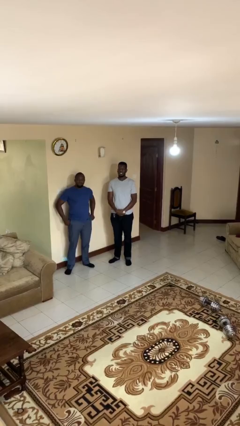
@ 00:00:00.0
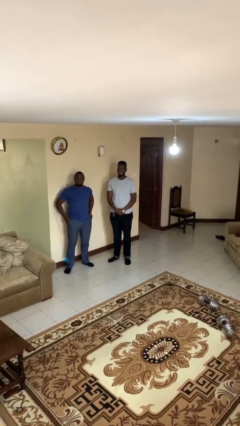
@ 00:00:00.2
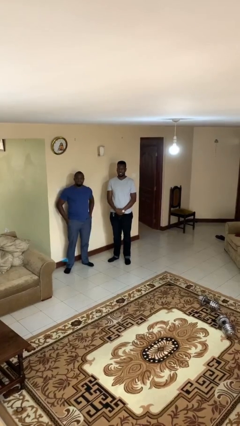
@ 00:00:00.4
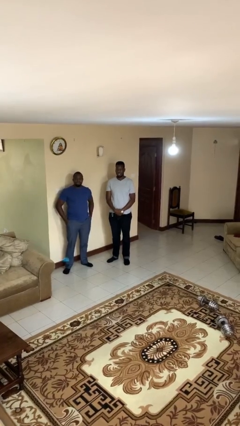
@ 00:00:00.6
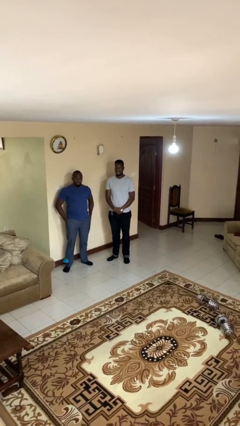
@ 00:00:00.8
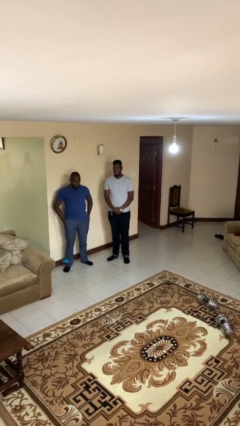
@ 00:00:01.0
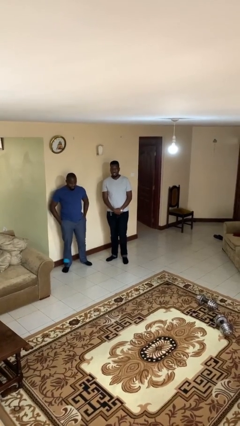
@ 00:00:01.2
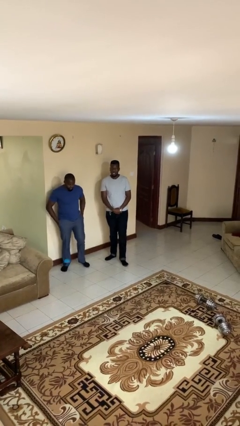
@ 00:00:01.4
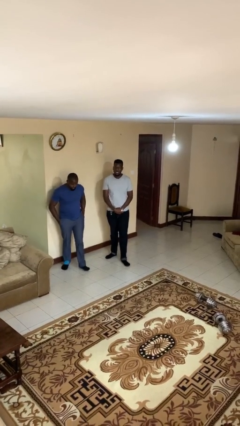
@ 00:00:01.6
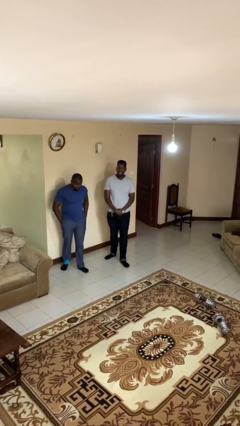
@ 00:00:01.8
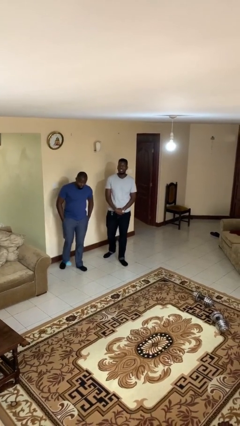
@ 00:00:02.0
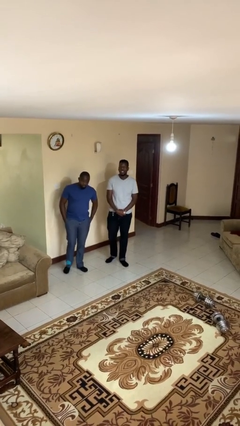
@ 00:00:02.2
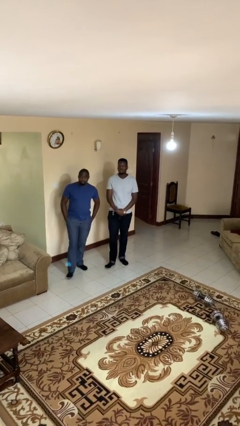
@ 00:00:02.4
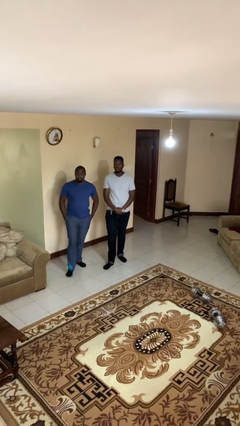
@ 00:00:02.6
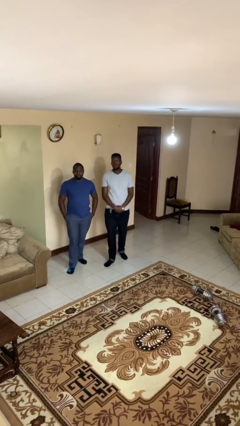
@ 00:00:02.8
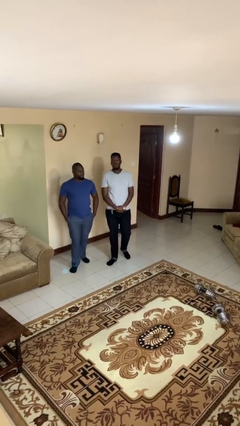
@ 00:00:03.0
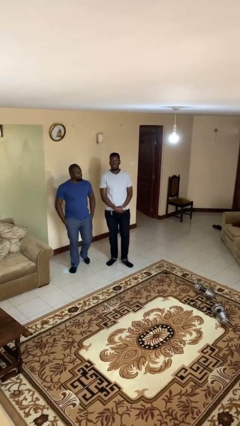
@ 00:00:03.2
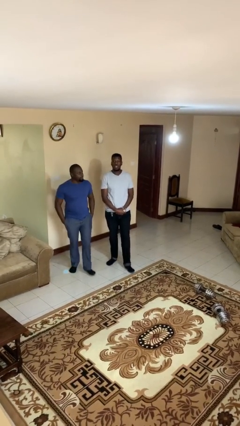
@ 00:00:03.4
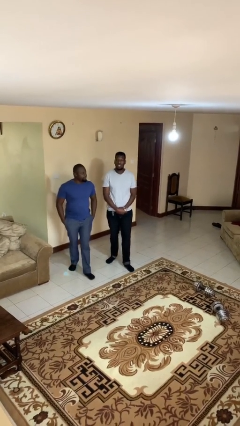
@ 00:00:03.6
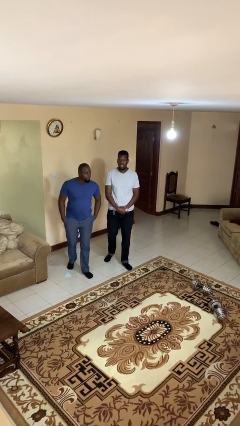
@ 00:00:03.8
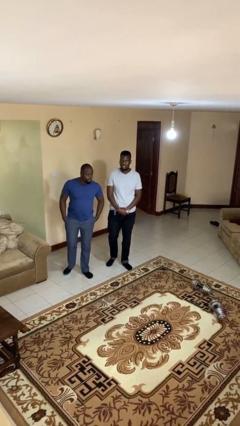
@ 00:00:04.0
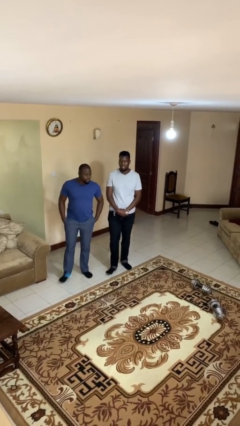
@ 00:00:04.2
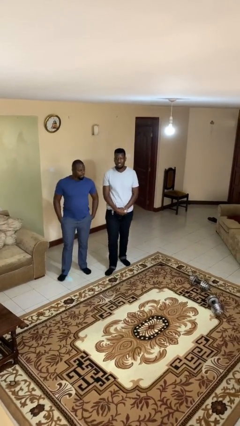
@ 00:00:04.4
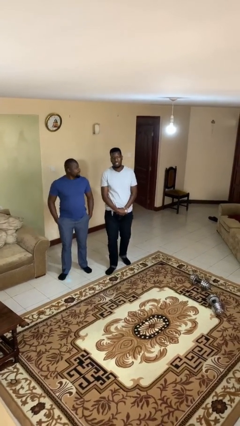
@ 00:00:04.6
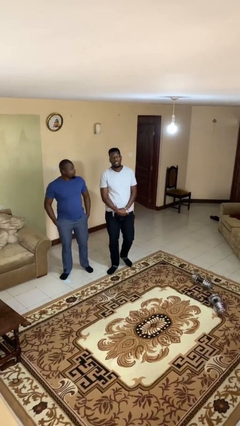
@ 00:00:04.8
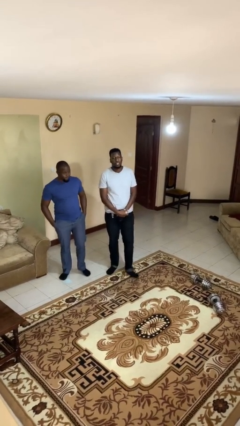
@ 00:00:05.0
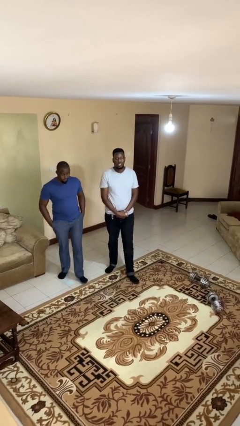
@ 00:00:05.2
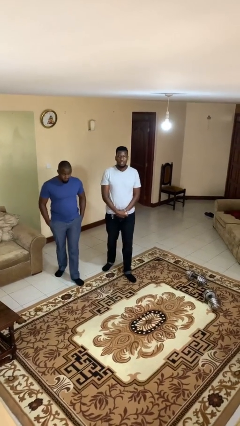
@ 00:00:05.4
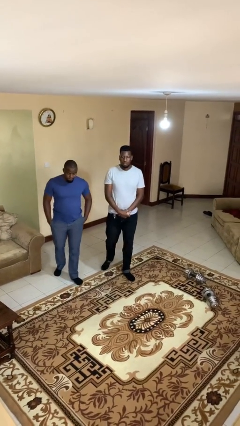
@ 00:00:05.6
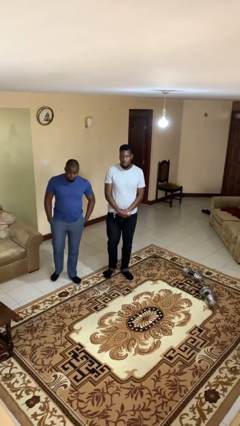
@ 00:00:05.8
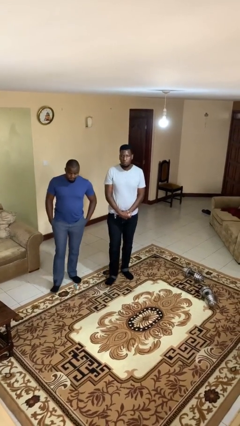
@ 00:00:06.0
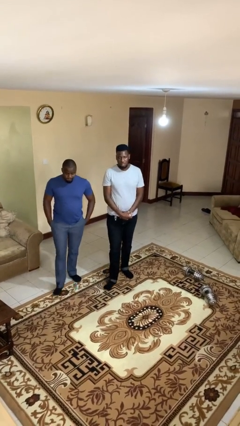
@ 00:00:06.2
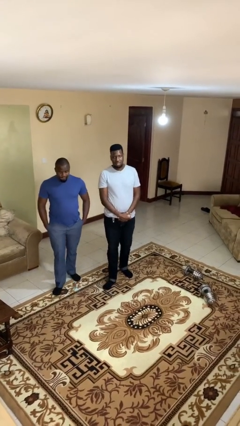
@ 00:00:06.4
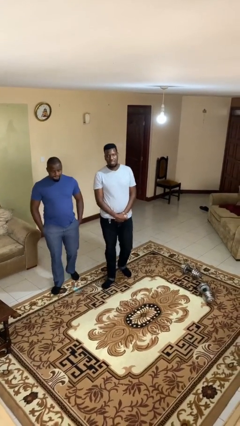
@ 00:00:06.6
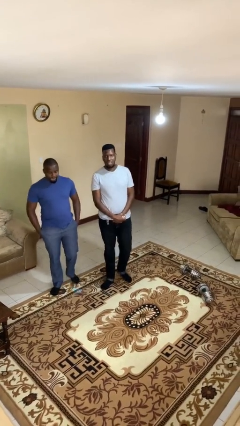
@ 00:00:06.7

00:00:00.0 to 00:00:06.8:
person talks to person

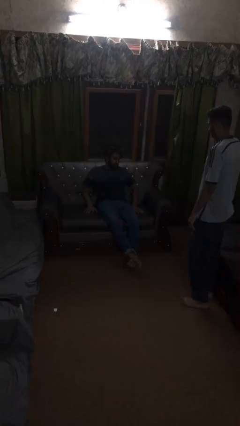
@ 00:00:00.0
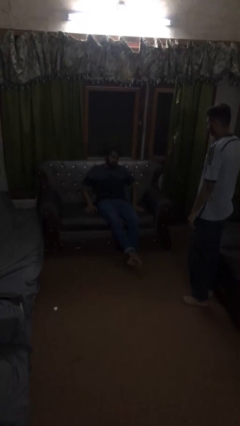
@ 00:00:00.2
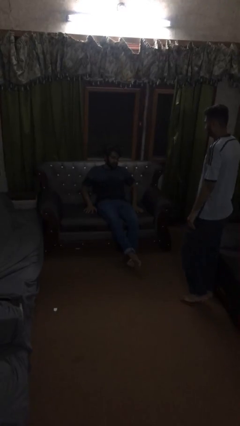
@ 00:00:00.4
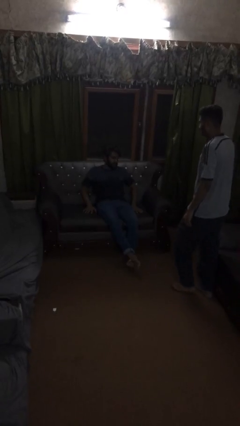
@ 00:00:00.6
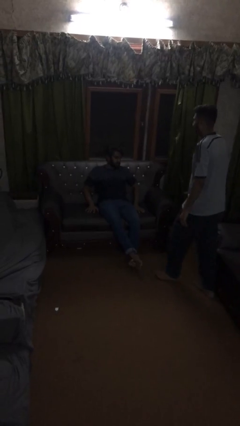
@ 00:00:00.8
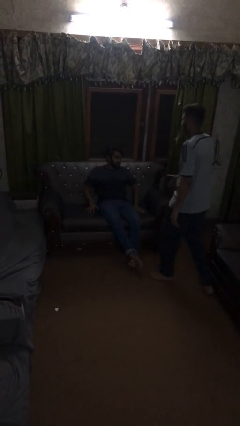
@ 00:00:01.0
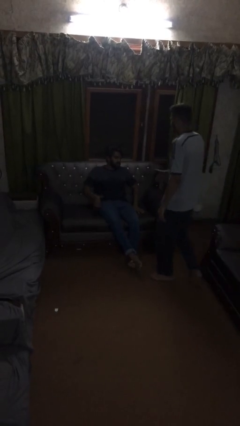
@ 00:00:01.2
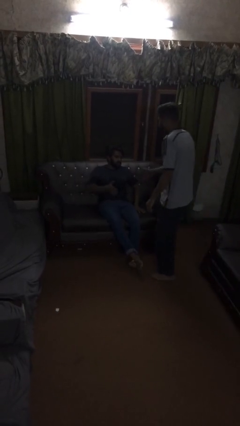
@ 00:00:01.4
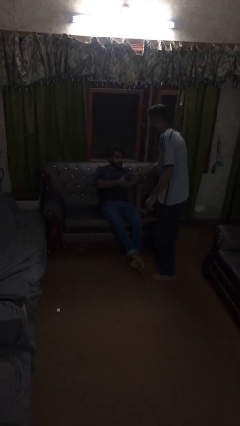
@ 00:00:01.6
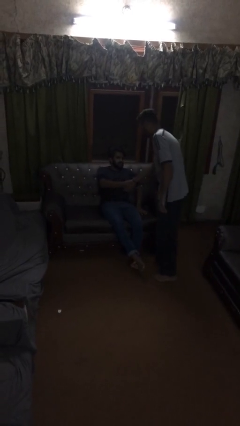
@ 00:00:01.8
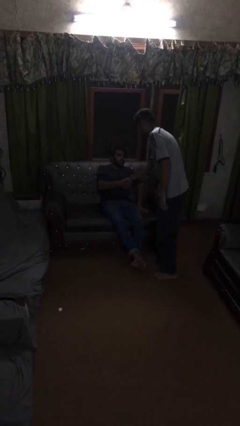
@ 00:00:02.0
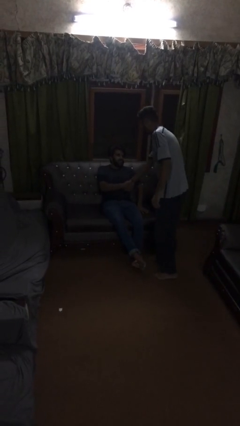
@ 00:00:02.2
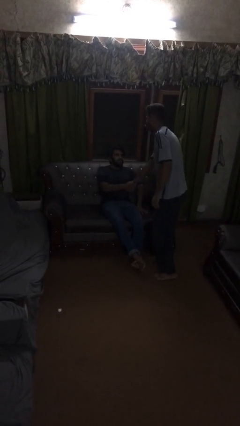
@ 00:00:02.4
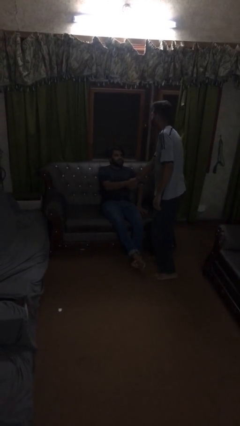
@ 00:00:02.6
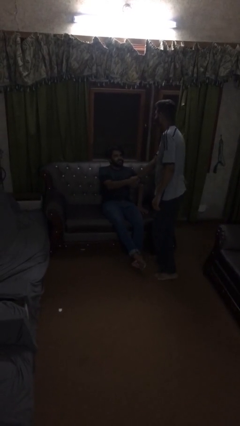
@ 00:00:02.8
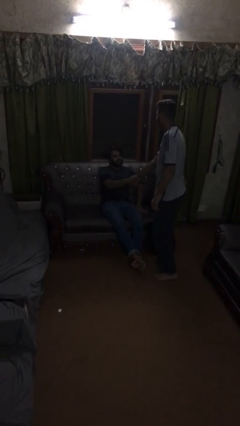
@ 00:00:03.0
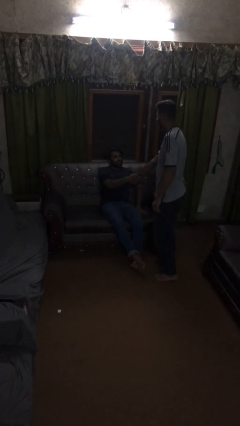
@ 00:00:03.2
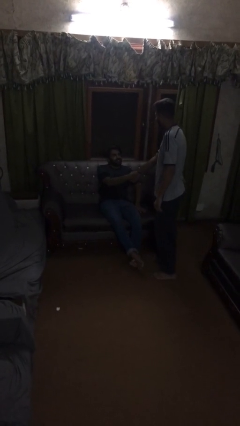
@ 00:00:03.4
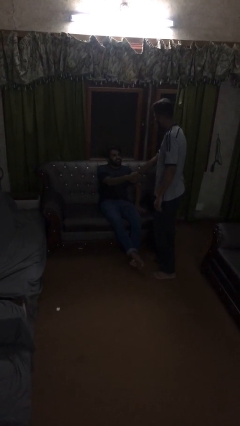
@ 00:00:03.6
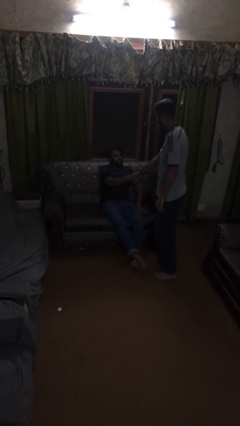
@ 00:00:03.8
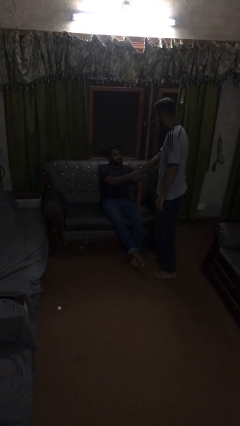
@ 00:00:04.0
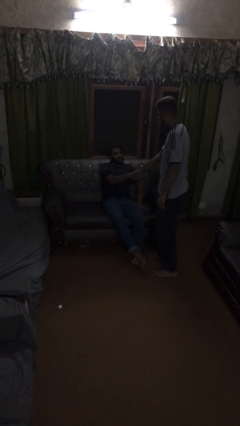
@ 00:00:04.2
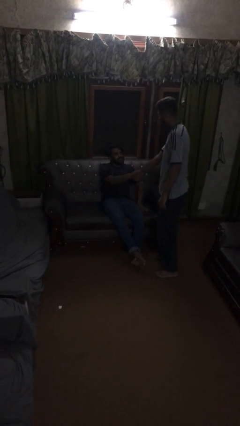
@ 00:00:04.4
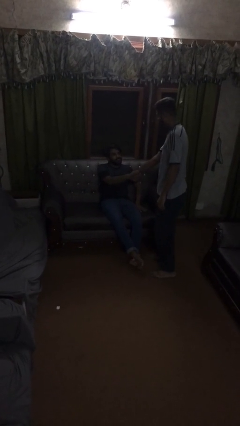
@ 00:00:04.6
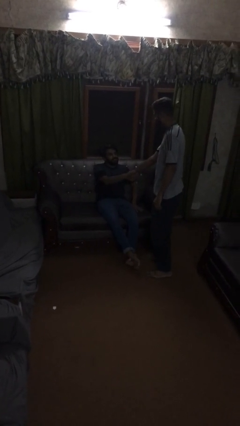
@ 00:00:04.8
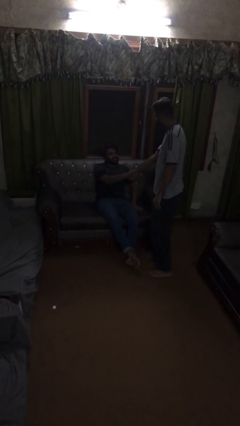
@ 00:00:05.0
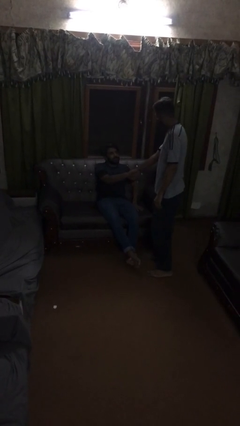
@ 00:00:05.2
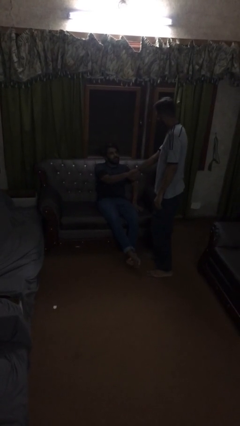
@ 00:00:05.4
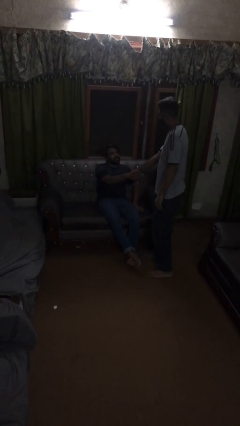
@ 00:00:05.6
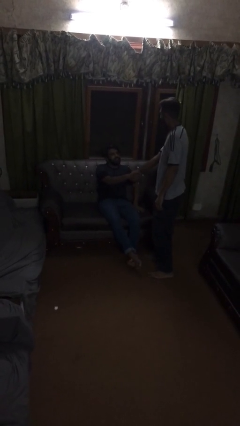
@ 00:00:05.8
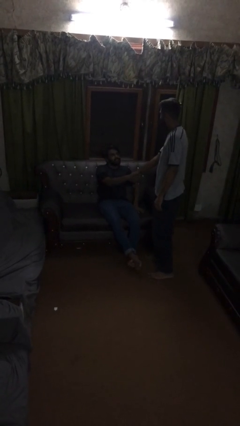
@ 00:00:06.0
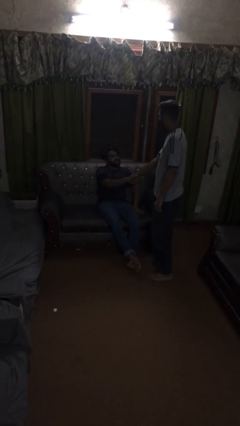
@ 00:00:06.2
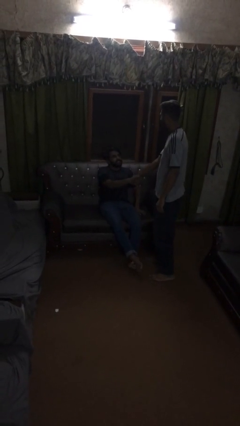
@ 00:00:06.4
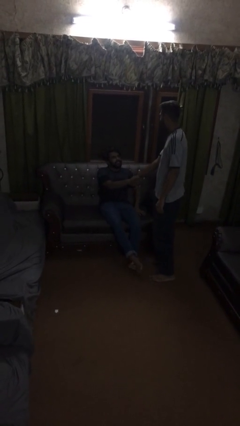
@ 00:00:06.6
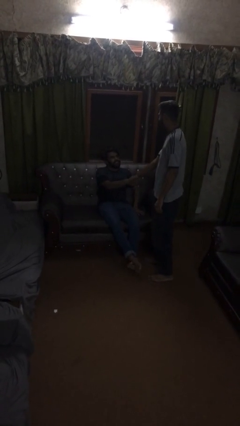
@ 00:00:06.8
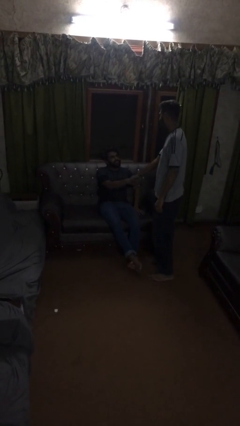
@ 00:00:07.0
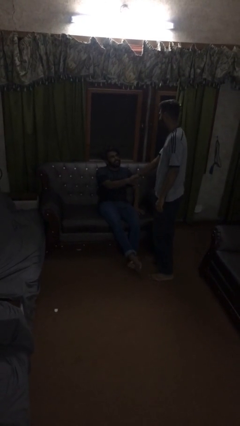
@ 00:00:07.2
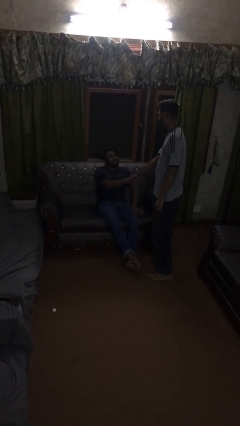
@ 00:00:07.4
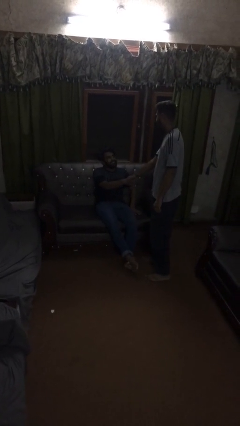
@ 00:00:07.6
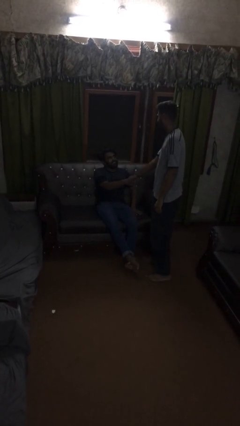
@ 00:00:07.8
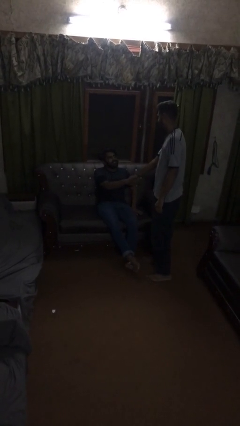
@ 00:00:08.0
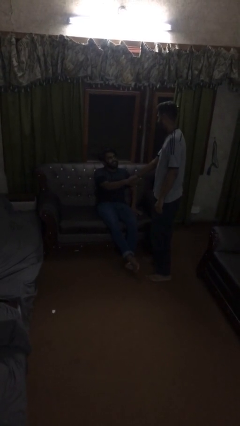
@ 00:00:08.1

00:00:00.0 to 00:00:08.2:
person shakes hand

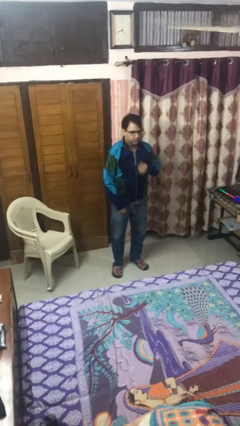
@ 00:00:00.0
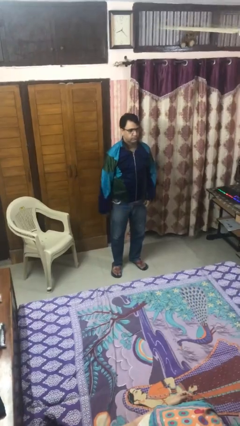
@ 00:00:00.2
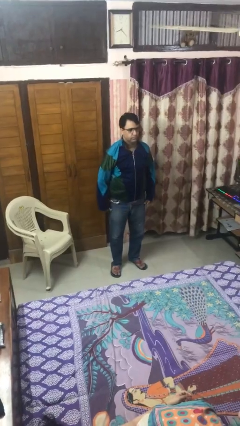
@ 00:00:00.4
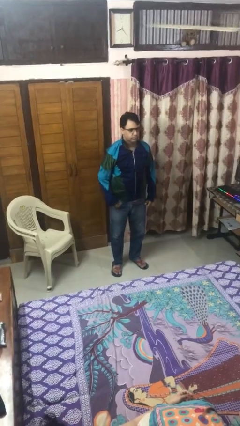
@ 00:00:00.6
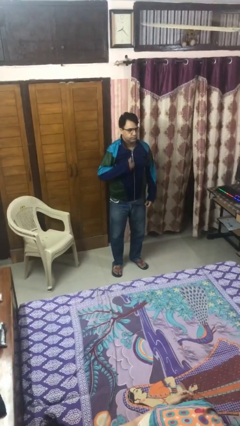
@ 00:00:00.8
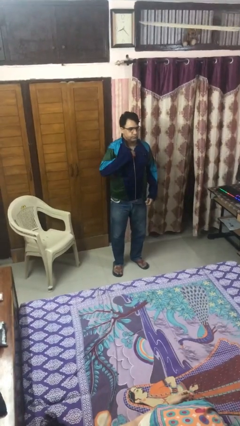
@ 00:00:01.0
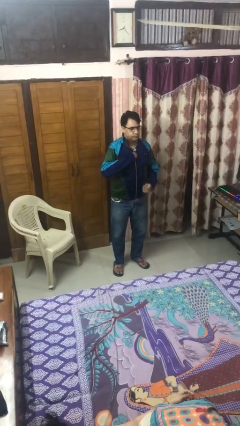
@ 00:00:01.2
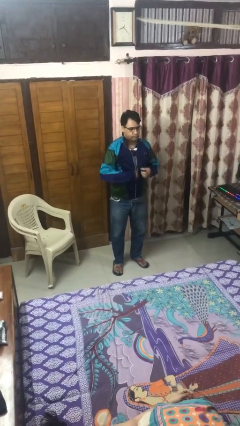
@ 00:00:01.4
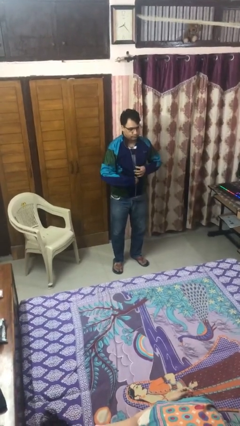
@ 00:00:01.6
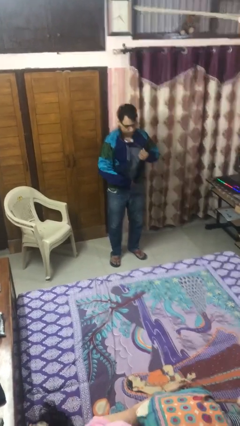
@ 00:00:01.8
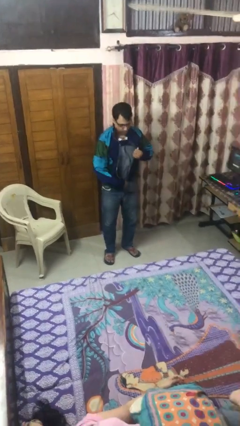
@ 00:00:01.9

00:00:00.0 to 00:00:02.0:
person unzips jacket

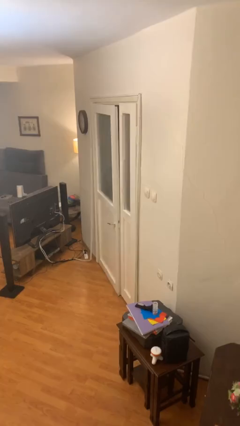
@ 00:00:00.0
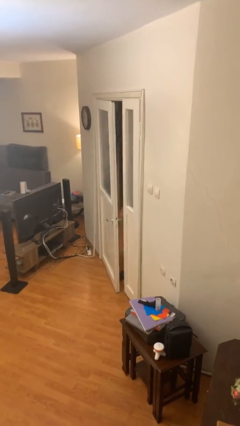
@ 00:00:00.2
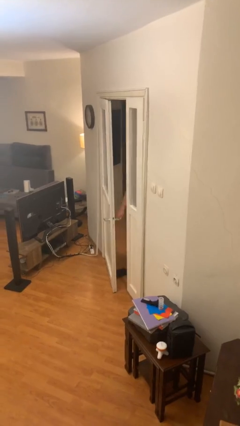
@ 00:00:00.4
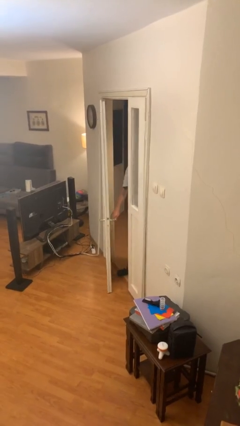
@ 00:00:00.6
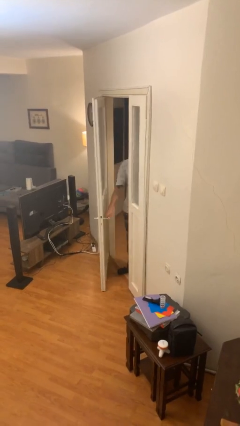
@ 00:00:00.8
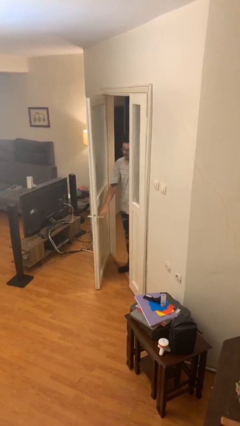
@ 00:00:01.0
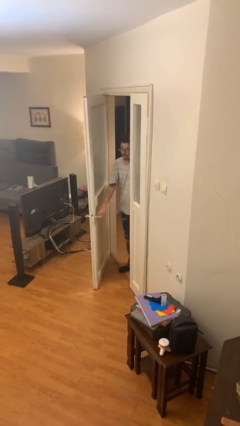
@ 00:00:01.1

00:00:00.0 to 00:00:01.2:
person opens facility door
